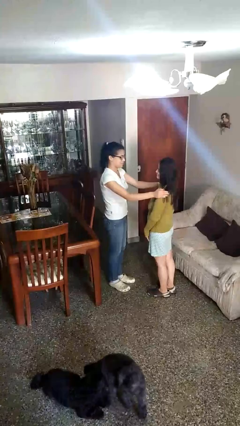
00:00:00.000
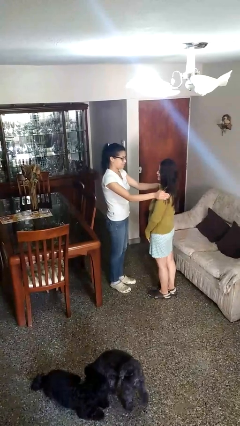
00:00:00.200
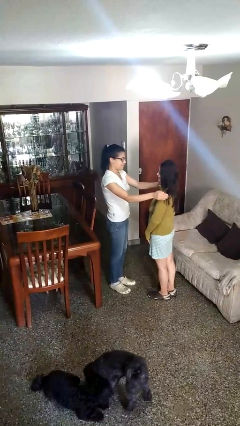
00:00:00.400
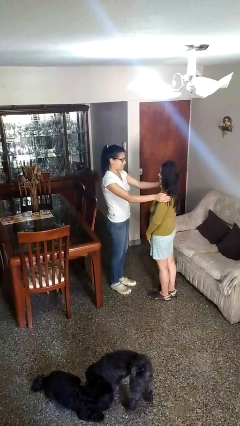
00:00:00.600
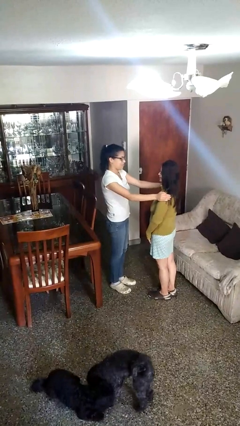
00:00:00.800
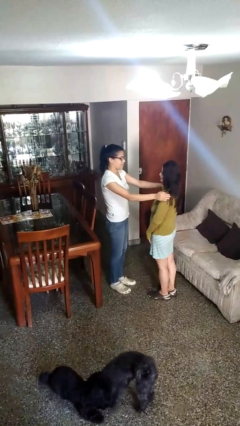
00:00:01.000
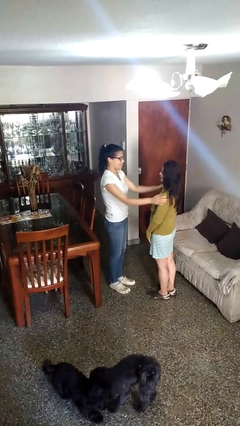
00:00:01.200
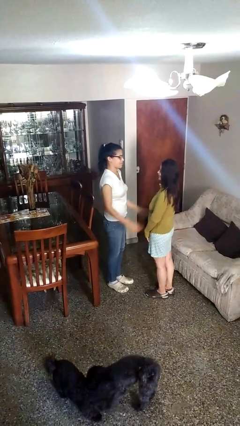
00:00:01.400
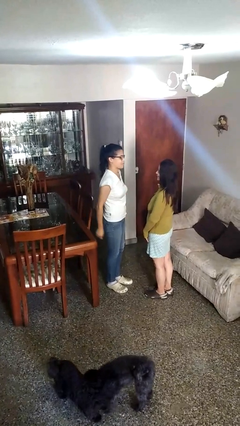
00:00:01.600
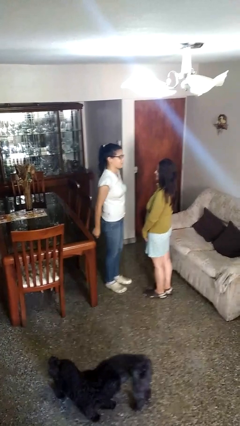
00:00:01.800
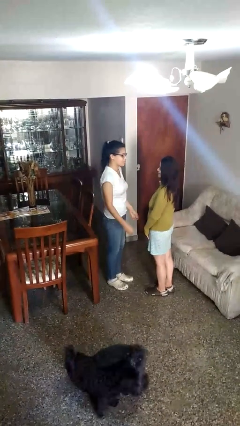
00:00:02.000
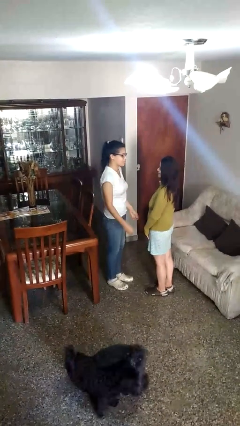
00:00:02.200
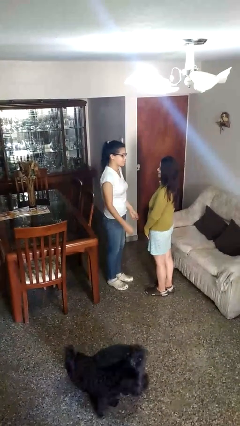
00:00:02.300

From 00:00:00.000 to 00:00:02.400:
person pounds shoulders of person

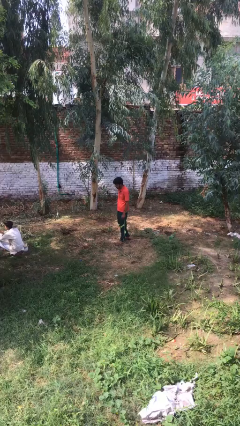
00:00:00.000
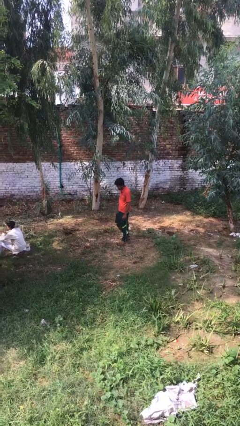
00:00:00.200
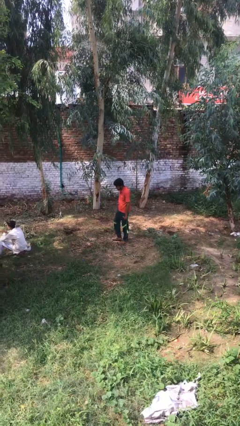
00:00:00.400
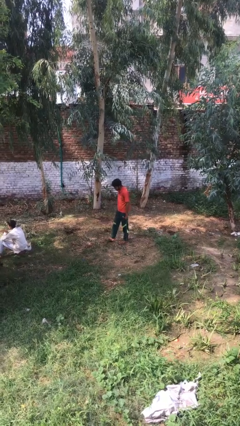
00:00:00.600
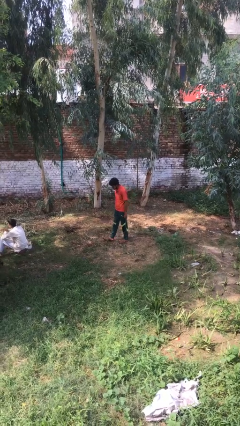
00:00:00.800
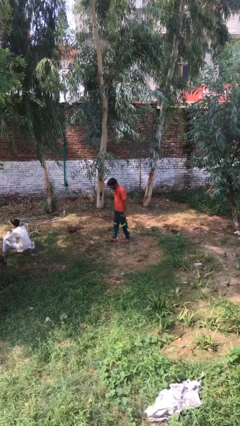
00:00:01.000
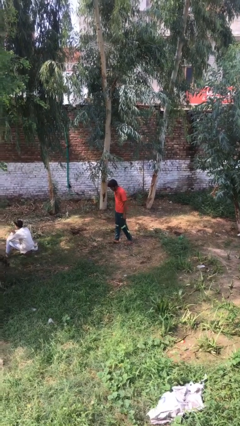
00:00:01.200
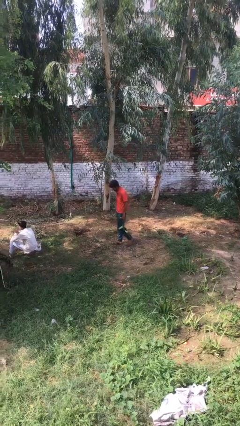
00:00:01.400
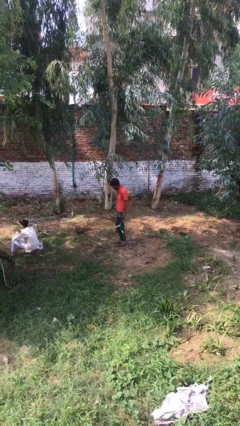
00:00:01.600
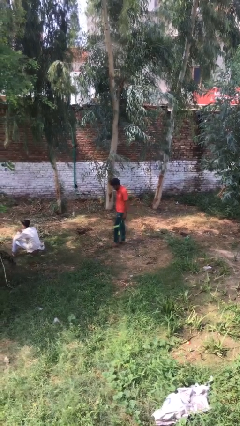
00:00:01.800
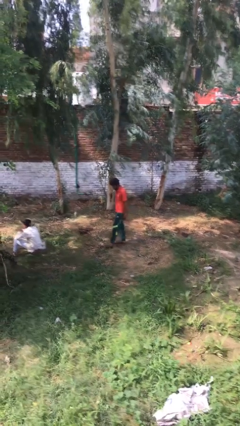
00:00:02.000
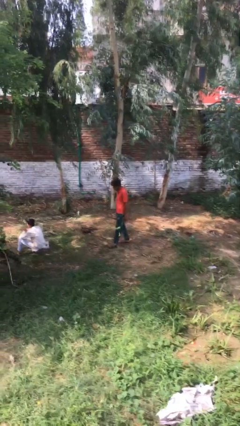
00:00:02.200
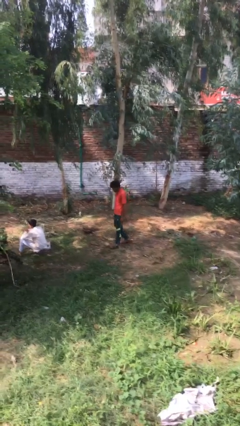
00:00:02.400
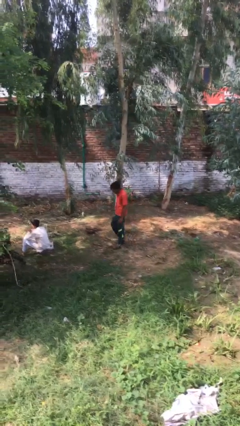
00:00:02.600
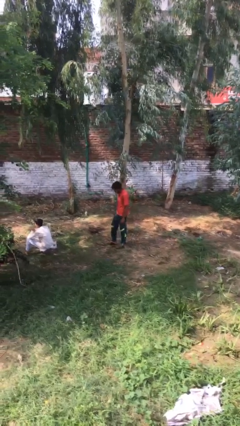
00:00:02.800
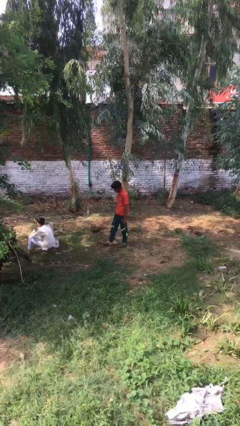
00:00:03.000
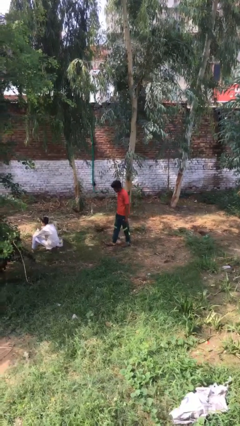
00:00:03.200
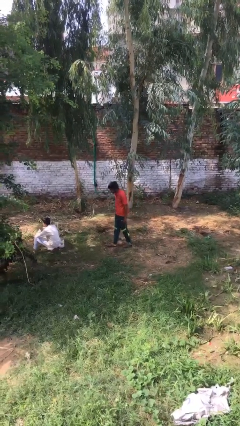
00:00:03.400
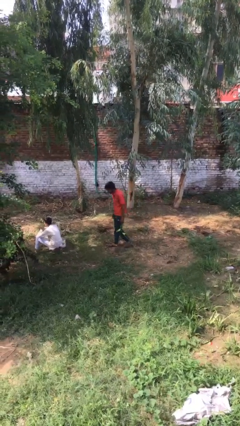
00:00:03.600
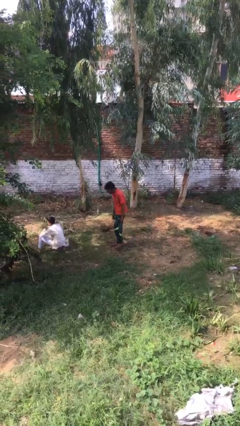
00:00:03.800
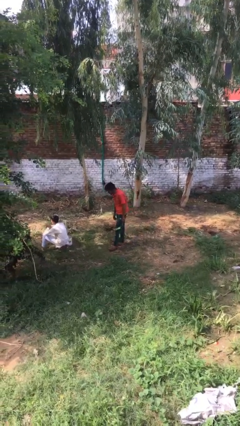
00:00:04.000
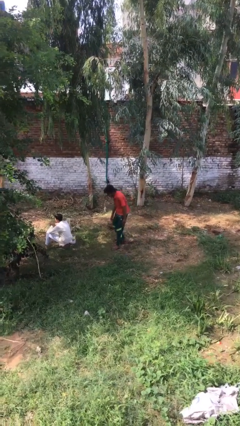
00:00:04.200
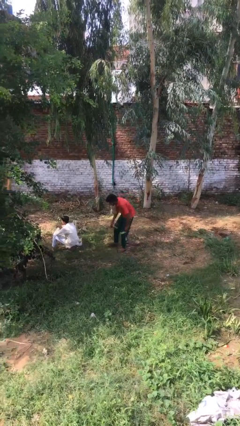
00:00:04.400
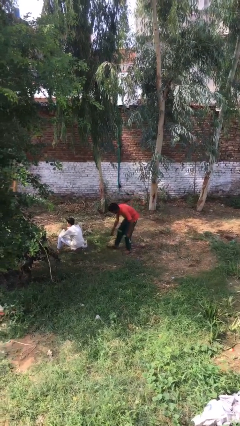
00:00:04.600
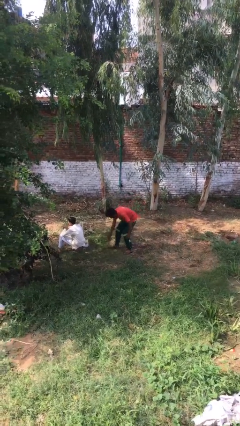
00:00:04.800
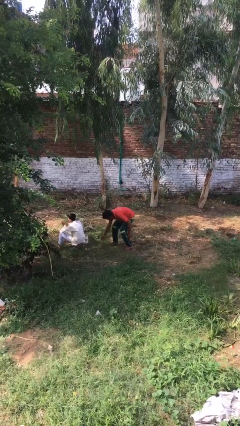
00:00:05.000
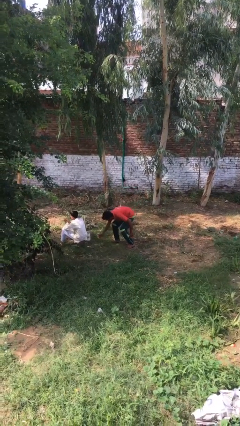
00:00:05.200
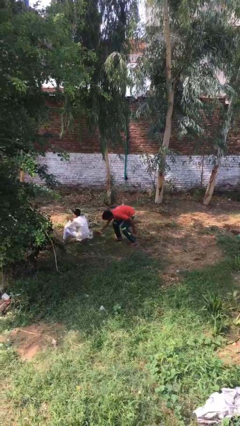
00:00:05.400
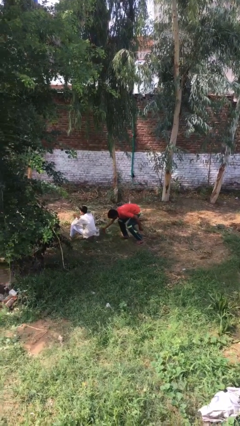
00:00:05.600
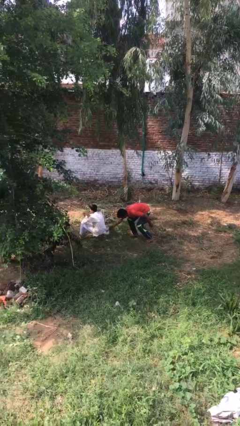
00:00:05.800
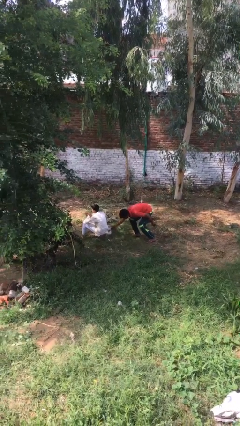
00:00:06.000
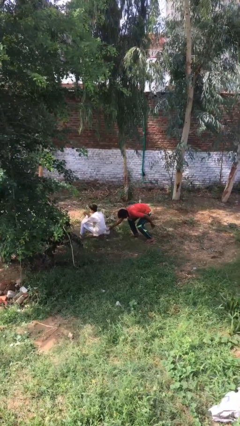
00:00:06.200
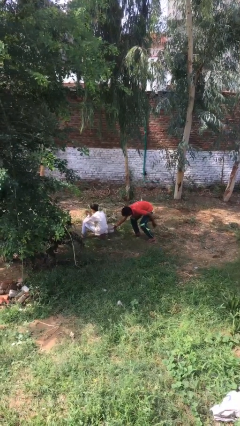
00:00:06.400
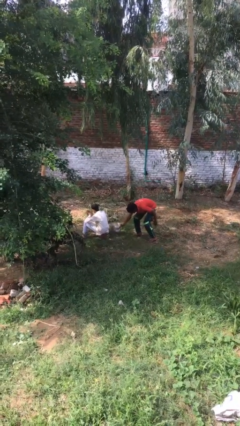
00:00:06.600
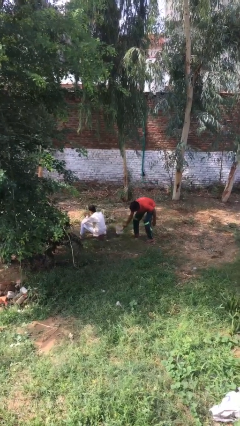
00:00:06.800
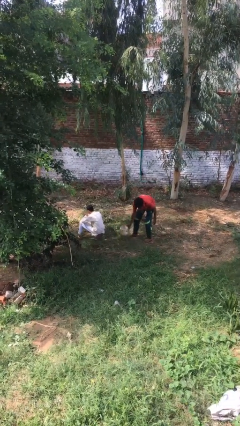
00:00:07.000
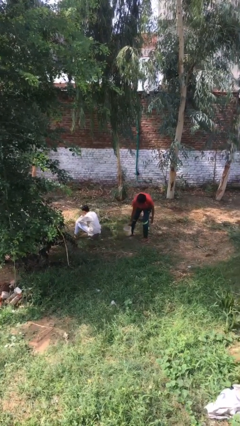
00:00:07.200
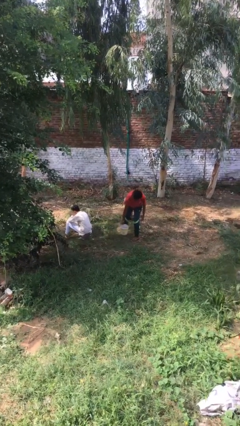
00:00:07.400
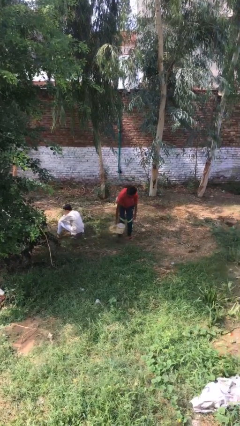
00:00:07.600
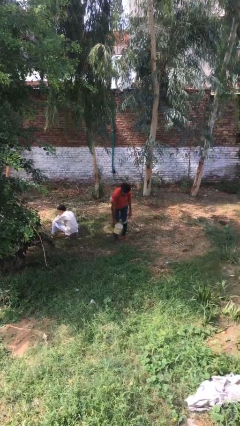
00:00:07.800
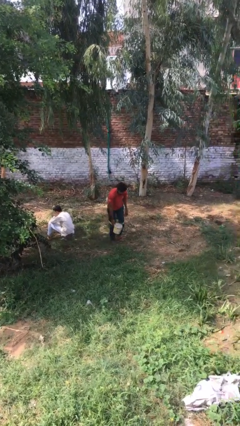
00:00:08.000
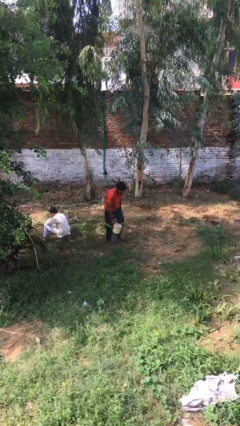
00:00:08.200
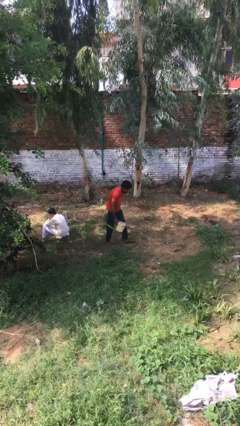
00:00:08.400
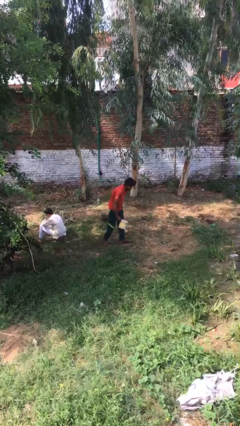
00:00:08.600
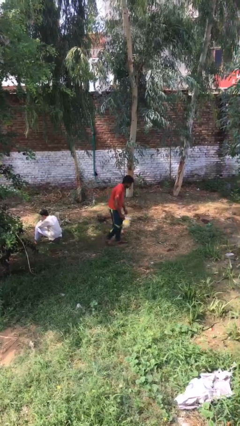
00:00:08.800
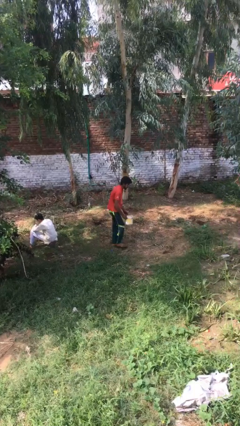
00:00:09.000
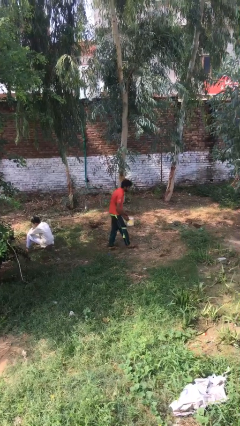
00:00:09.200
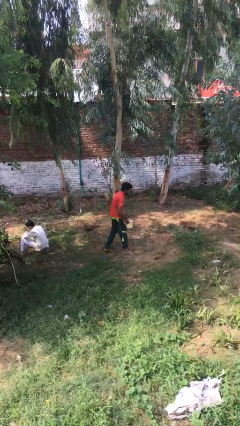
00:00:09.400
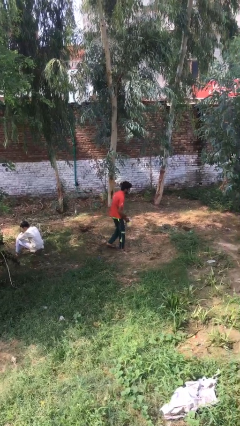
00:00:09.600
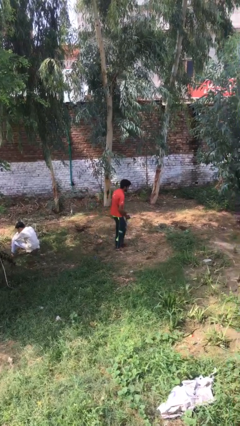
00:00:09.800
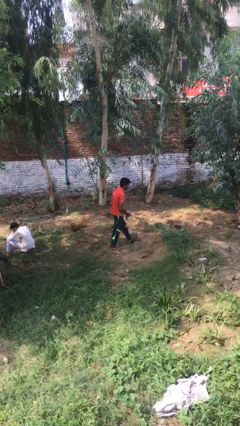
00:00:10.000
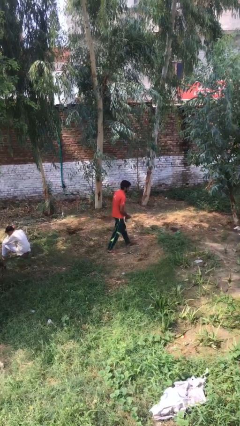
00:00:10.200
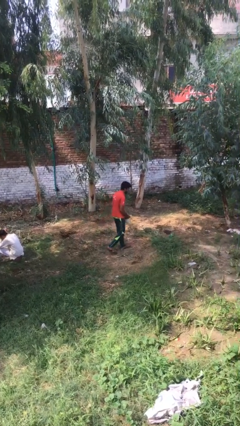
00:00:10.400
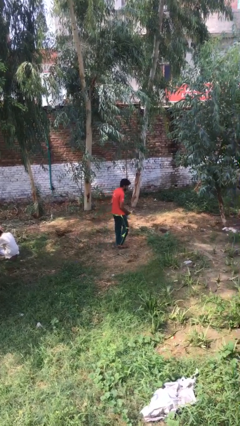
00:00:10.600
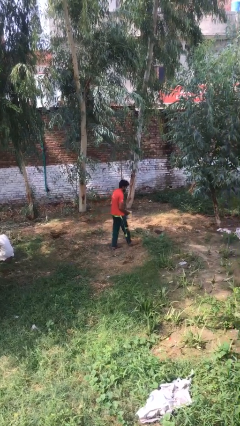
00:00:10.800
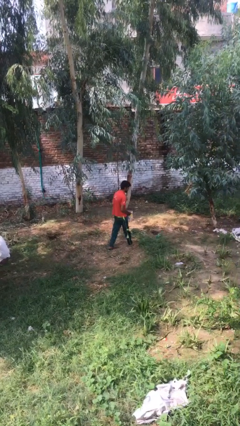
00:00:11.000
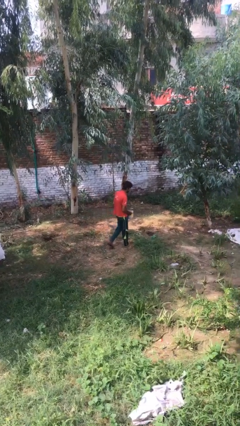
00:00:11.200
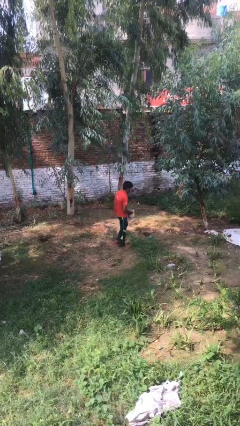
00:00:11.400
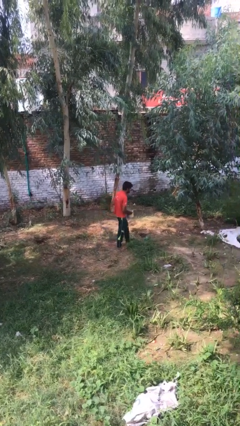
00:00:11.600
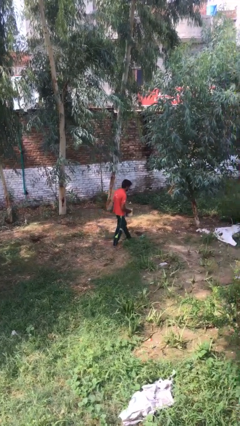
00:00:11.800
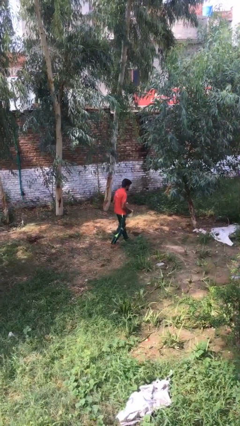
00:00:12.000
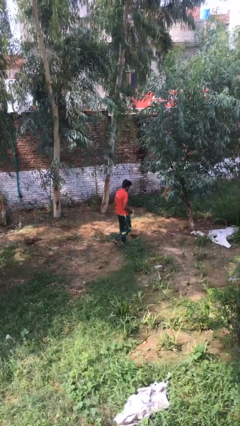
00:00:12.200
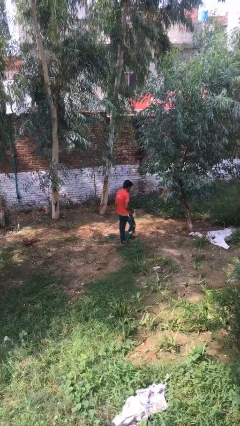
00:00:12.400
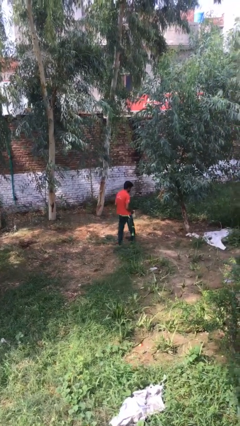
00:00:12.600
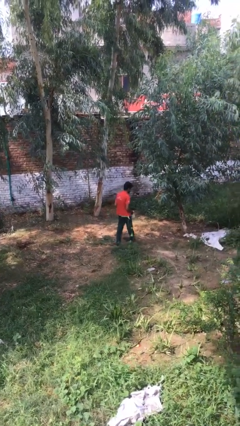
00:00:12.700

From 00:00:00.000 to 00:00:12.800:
person steals object from person

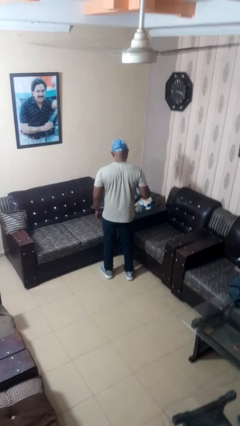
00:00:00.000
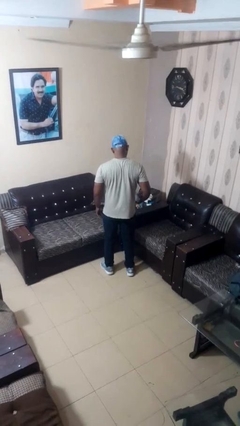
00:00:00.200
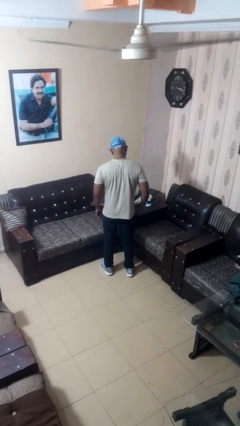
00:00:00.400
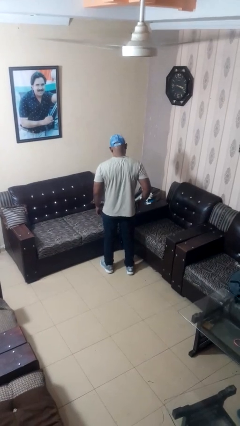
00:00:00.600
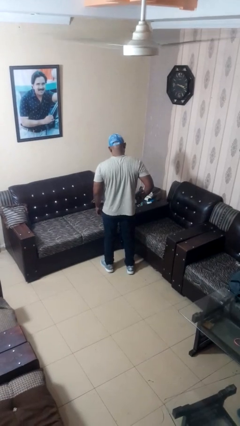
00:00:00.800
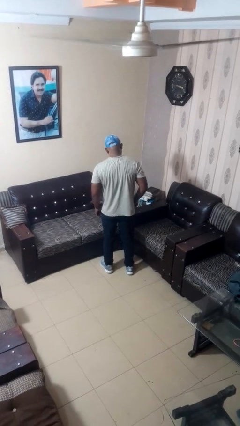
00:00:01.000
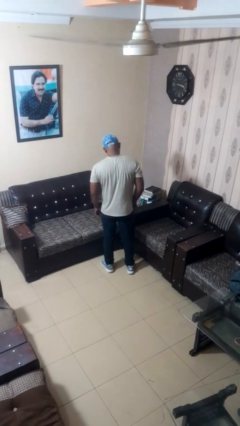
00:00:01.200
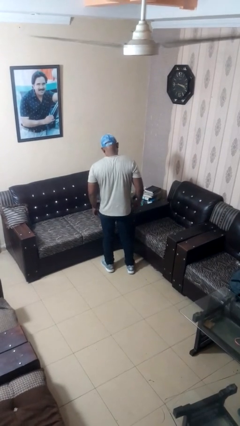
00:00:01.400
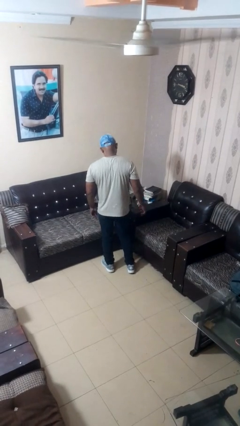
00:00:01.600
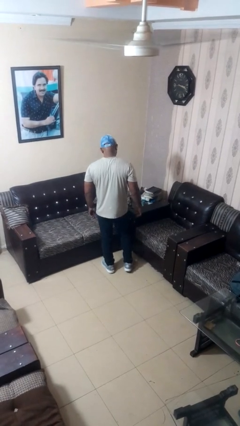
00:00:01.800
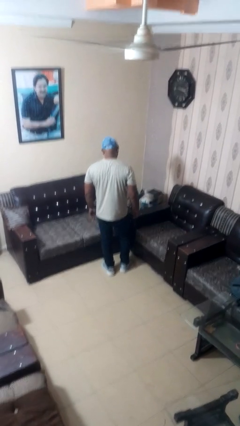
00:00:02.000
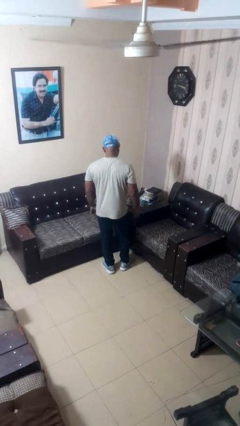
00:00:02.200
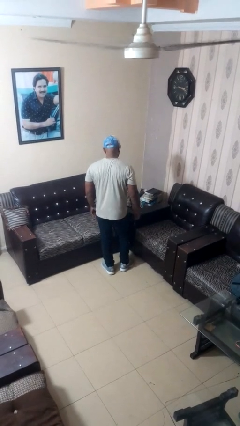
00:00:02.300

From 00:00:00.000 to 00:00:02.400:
person puts phone into pocket

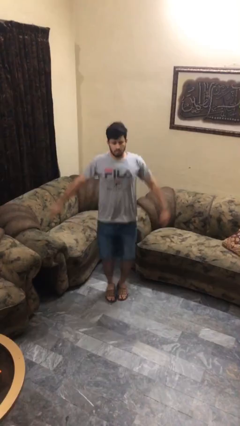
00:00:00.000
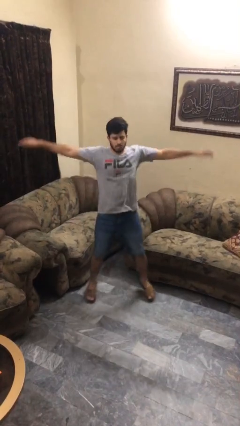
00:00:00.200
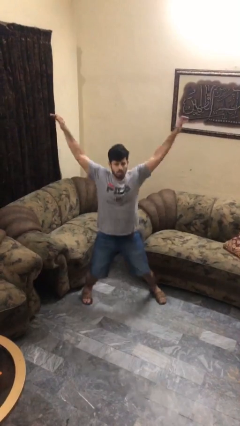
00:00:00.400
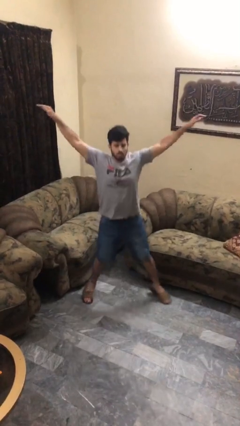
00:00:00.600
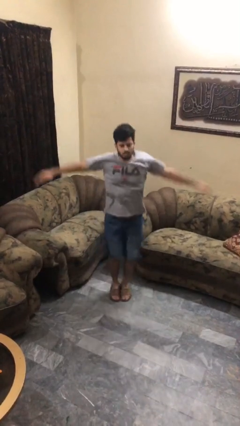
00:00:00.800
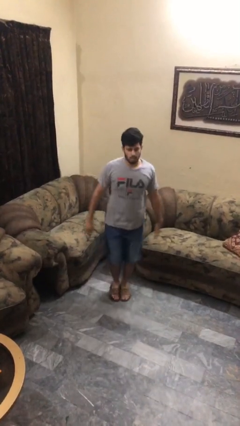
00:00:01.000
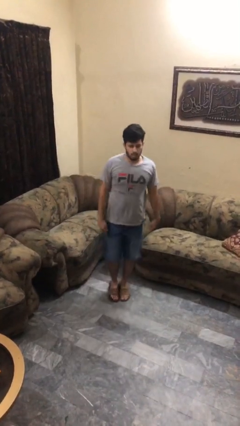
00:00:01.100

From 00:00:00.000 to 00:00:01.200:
person exercises with jumping jacks
